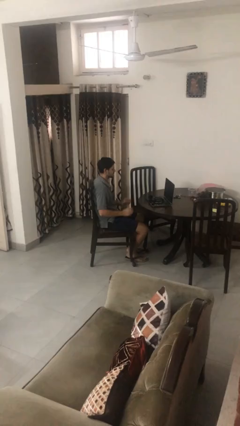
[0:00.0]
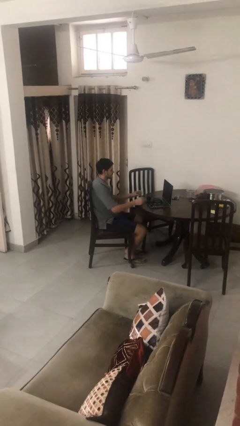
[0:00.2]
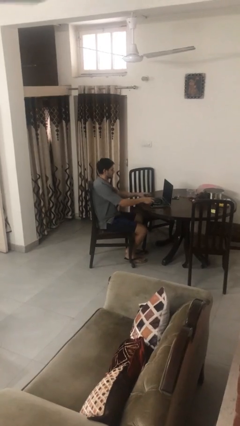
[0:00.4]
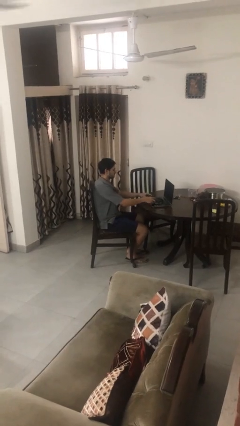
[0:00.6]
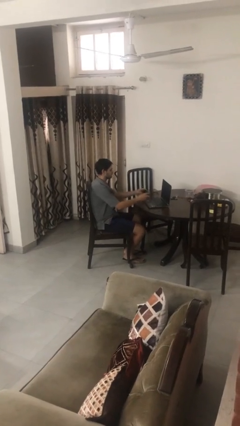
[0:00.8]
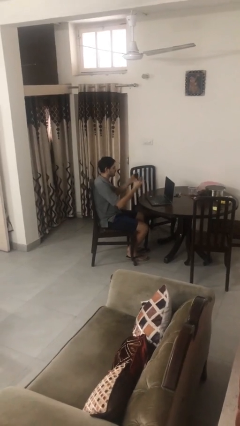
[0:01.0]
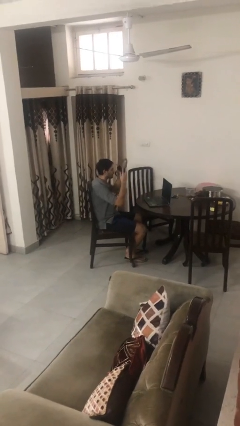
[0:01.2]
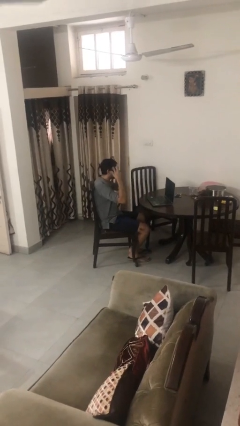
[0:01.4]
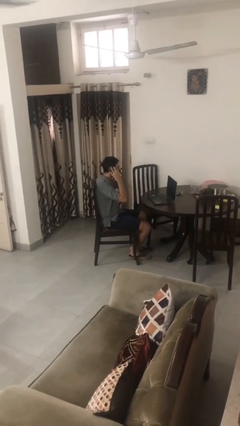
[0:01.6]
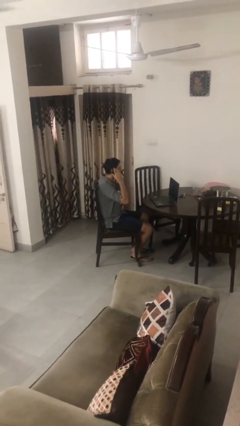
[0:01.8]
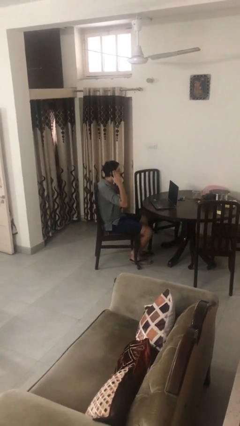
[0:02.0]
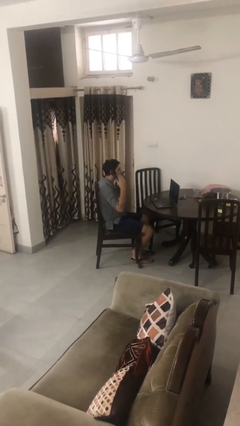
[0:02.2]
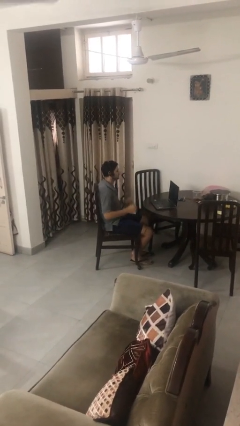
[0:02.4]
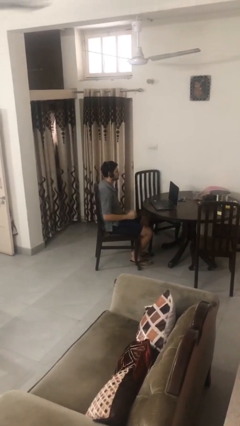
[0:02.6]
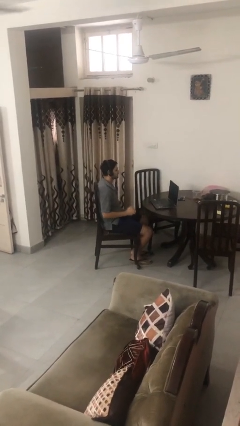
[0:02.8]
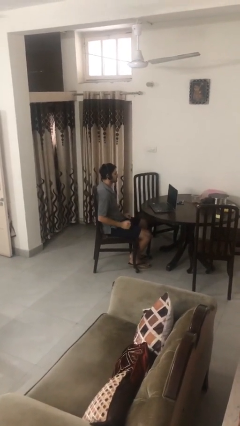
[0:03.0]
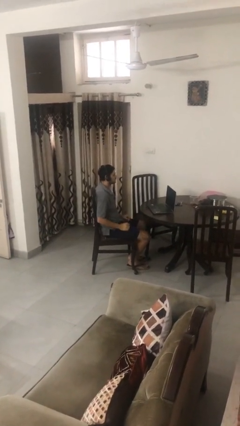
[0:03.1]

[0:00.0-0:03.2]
person puts on headphones

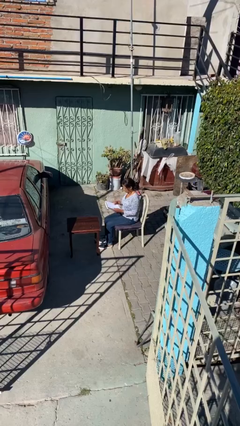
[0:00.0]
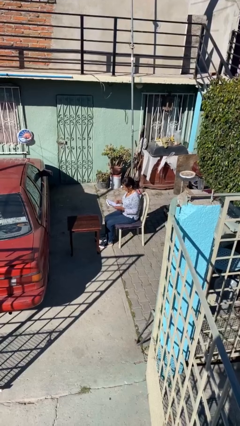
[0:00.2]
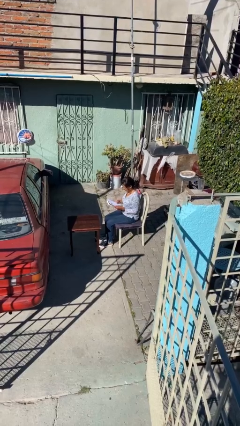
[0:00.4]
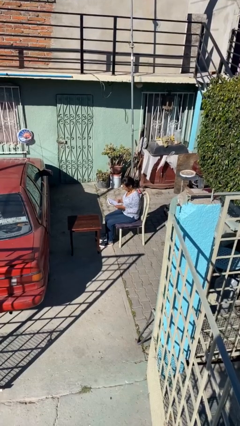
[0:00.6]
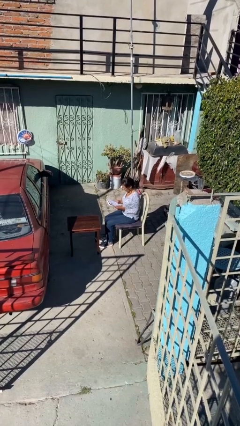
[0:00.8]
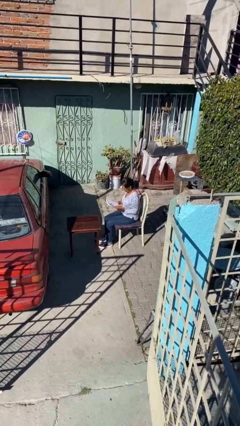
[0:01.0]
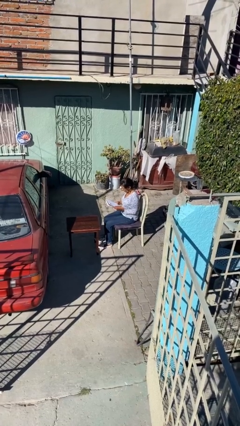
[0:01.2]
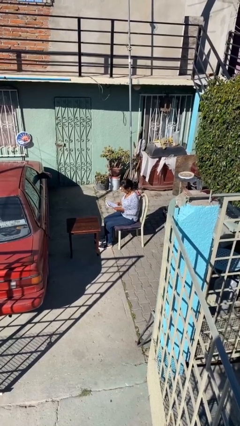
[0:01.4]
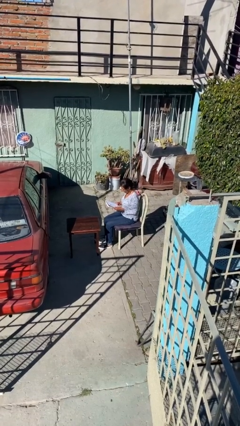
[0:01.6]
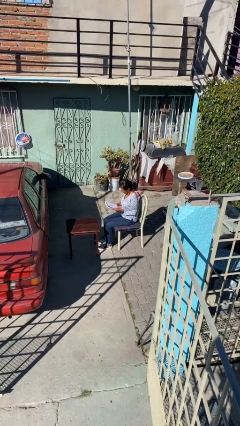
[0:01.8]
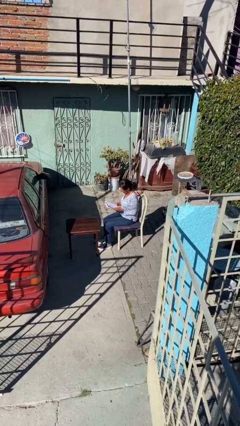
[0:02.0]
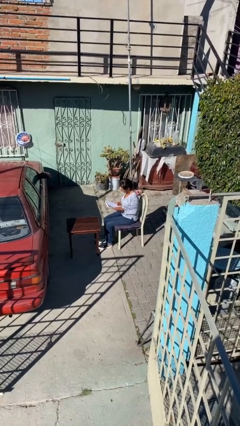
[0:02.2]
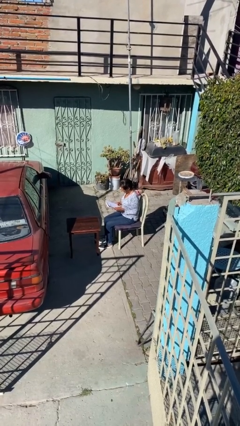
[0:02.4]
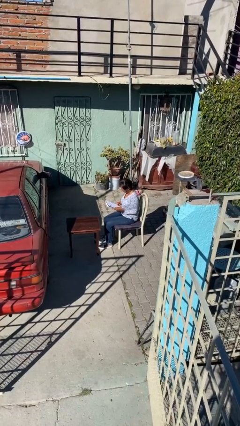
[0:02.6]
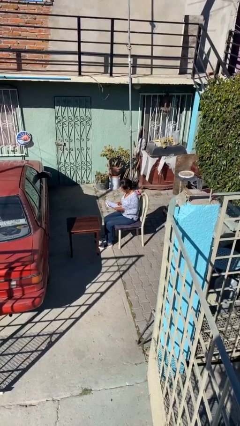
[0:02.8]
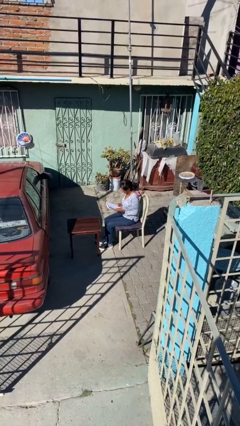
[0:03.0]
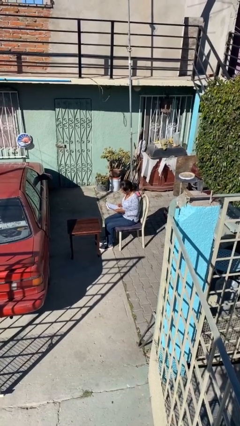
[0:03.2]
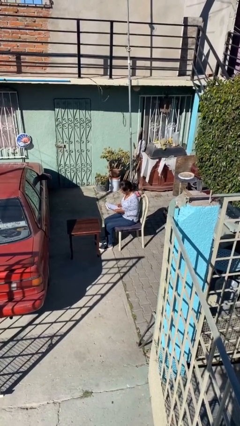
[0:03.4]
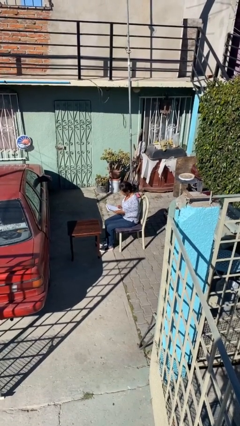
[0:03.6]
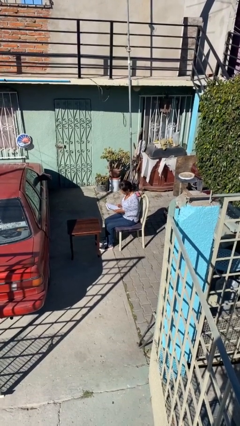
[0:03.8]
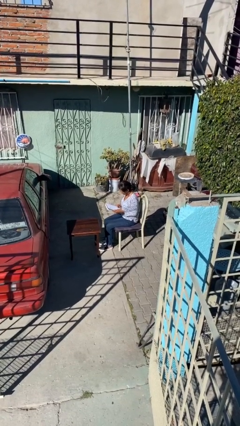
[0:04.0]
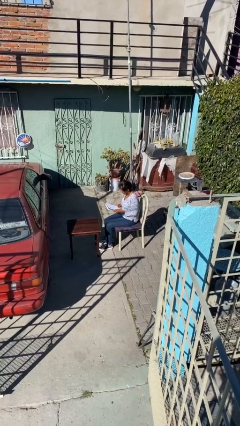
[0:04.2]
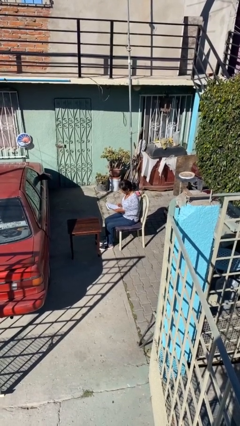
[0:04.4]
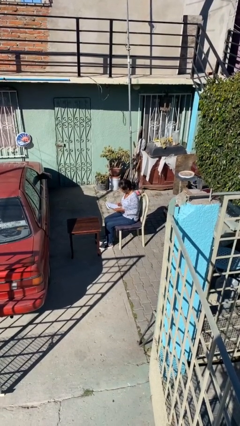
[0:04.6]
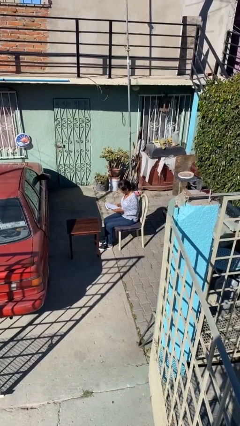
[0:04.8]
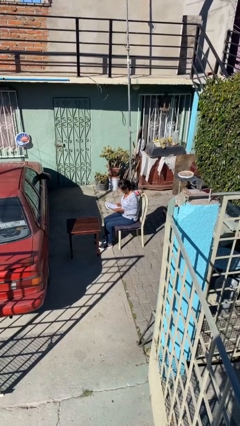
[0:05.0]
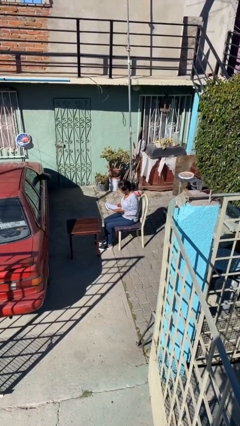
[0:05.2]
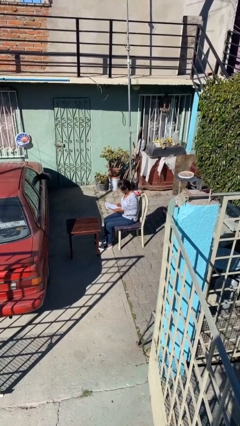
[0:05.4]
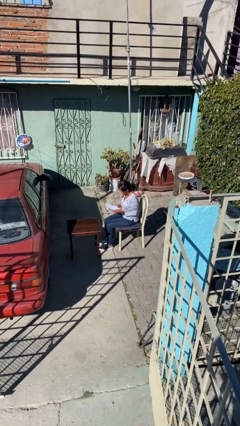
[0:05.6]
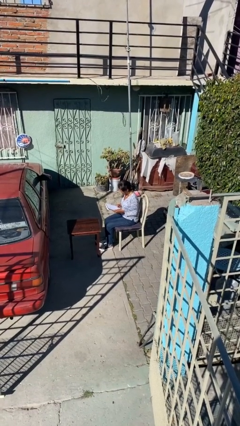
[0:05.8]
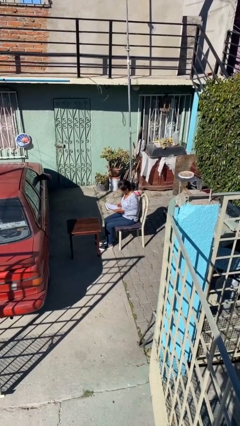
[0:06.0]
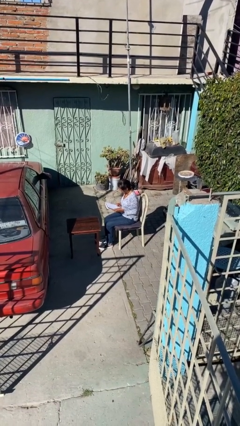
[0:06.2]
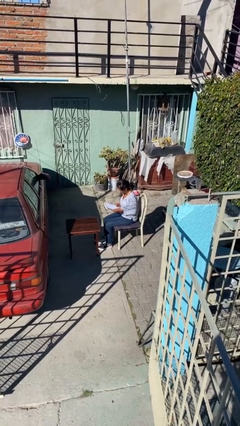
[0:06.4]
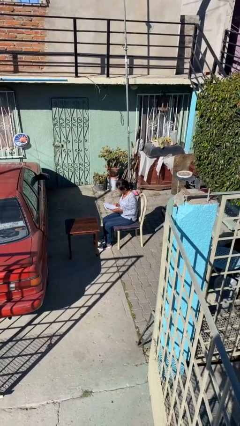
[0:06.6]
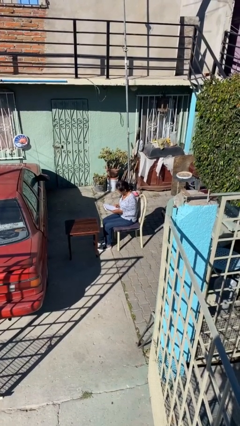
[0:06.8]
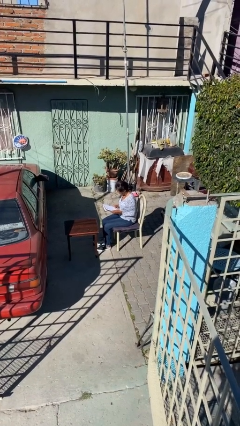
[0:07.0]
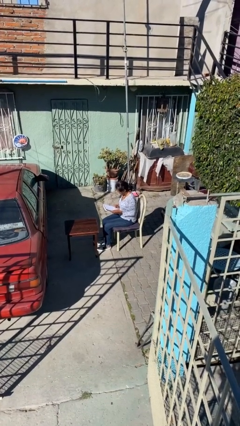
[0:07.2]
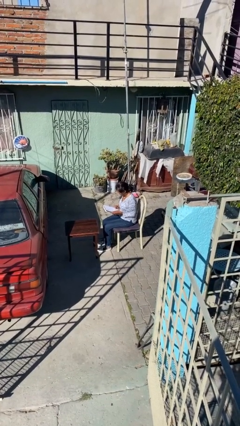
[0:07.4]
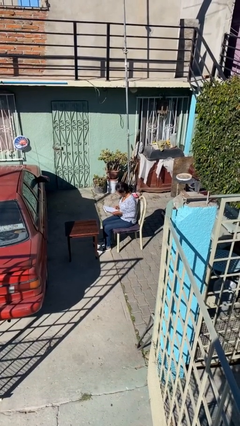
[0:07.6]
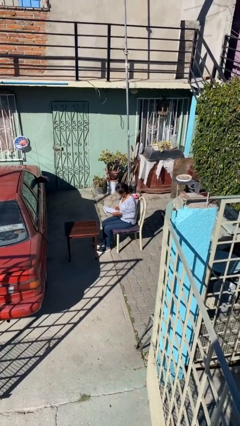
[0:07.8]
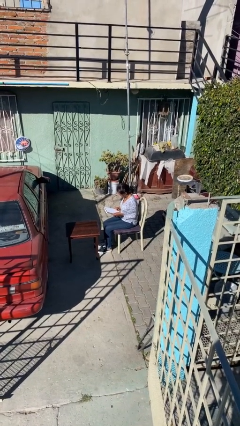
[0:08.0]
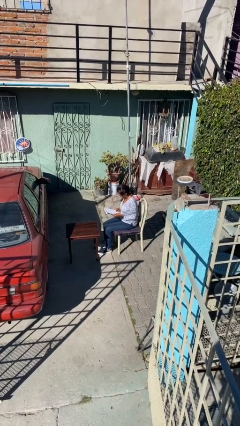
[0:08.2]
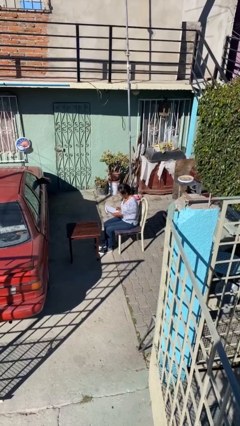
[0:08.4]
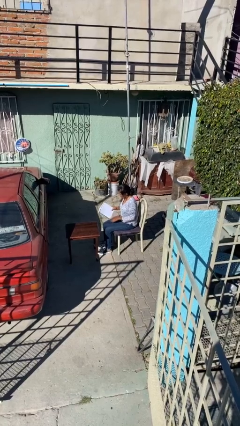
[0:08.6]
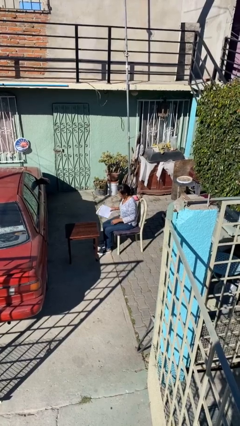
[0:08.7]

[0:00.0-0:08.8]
person reads document

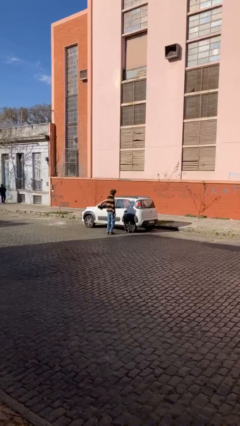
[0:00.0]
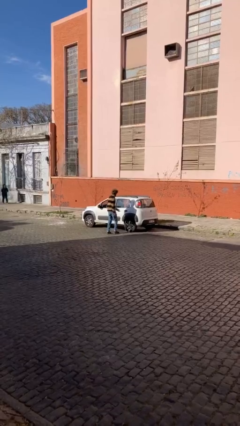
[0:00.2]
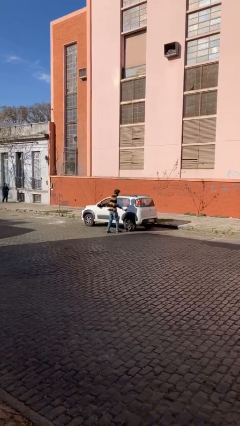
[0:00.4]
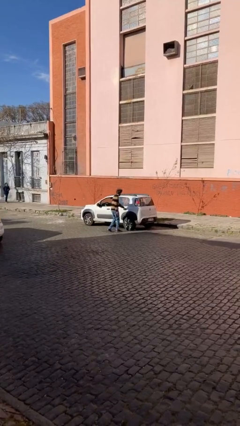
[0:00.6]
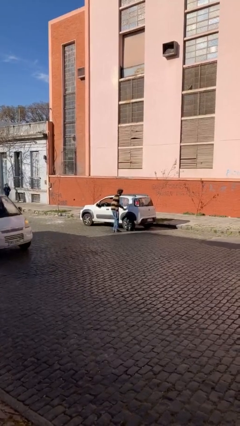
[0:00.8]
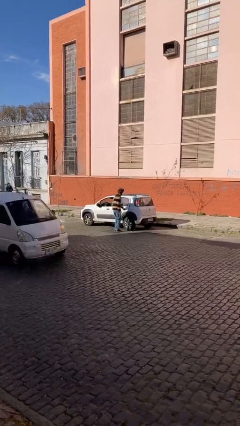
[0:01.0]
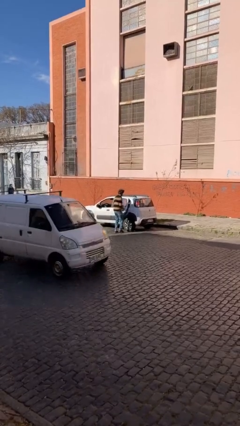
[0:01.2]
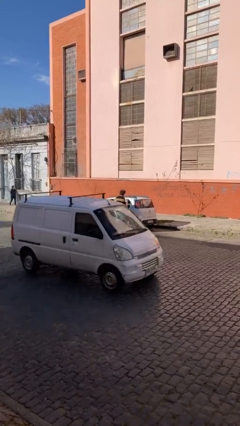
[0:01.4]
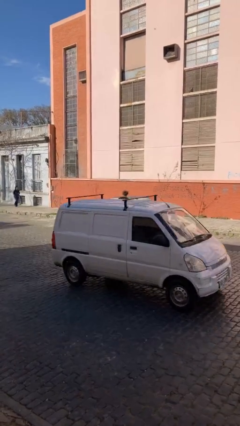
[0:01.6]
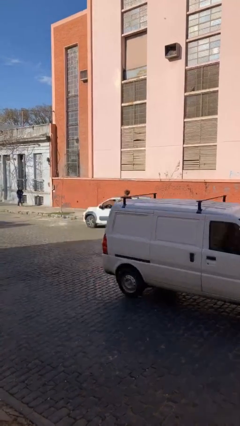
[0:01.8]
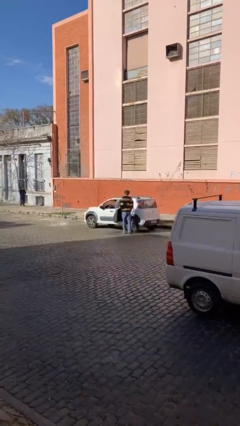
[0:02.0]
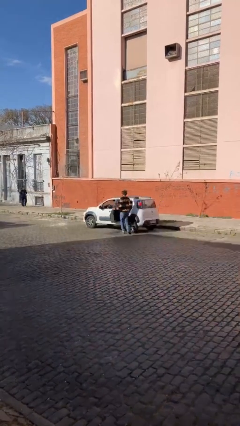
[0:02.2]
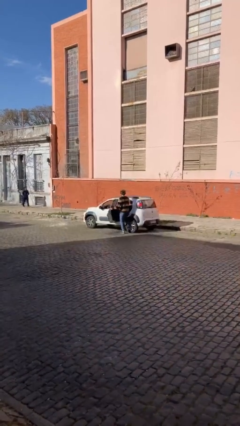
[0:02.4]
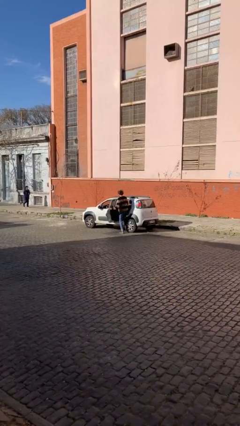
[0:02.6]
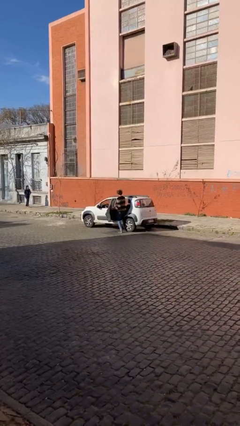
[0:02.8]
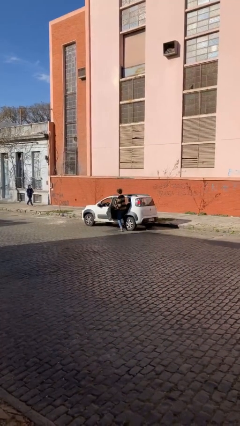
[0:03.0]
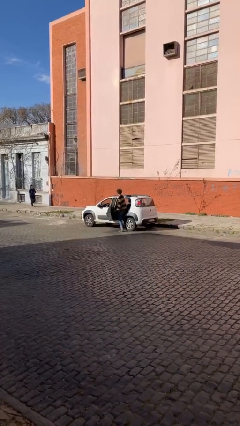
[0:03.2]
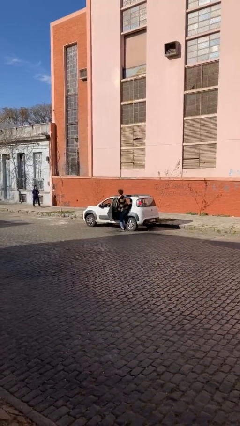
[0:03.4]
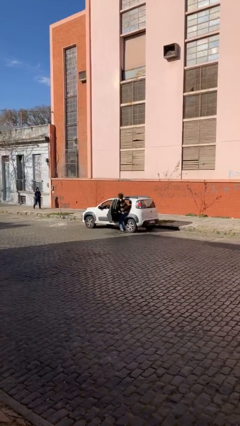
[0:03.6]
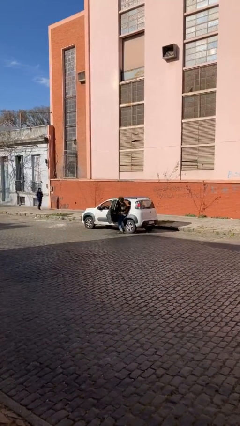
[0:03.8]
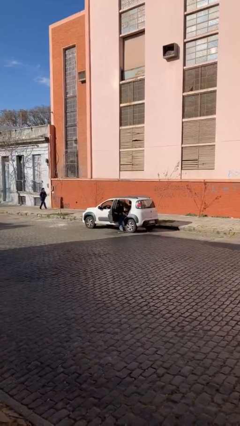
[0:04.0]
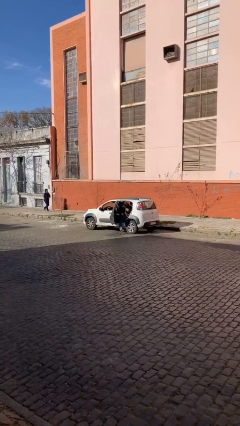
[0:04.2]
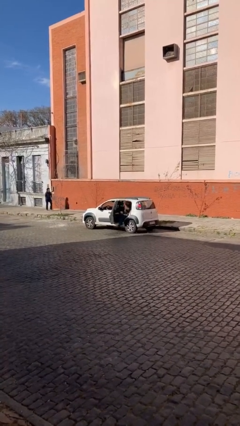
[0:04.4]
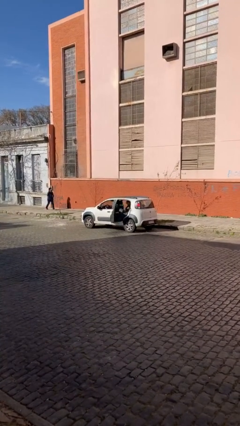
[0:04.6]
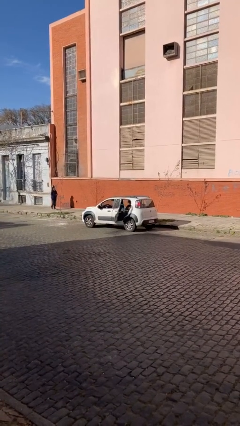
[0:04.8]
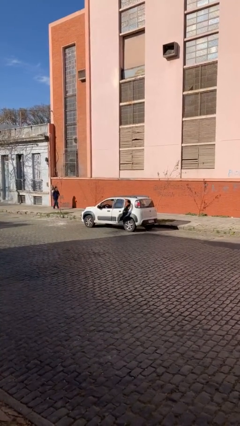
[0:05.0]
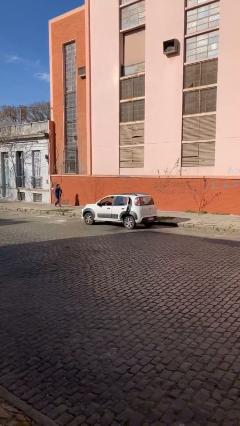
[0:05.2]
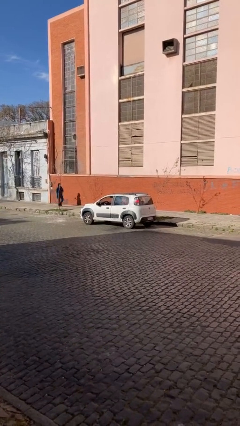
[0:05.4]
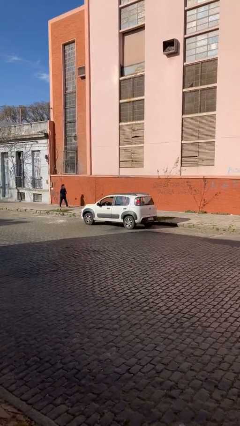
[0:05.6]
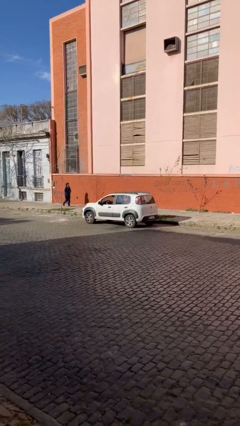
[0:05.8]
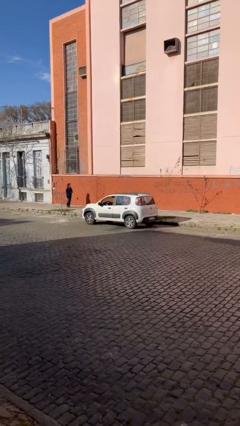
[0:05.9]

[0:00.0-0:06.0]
car picks up person
